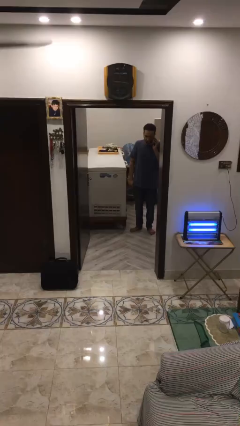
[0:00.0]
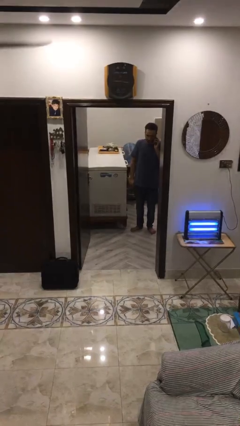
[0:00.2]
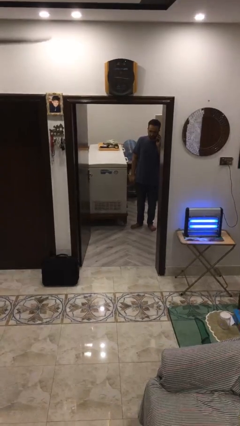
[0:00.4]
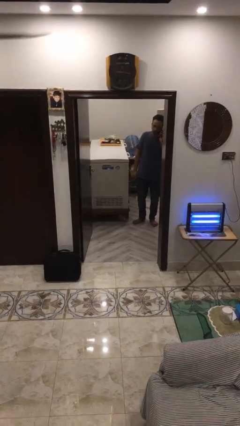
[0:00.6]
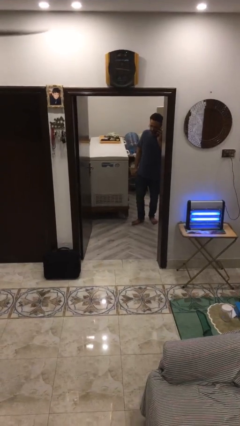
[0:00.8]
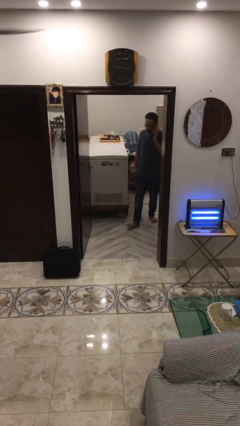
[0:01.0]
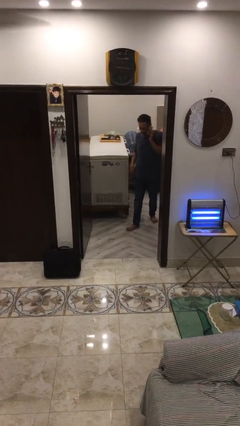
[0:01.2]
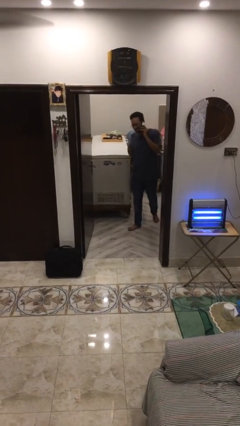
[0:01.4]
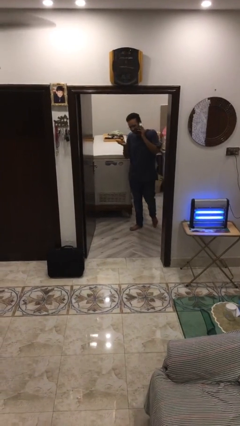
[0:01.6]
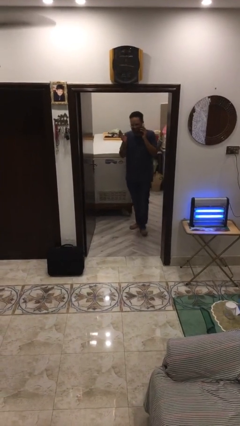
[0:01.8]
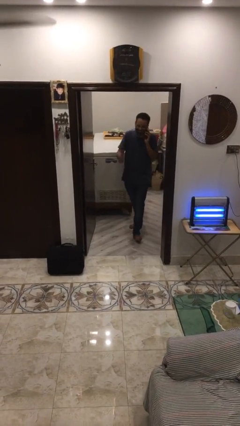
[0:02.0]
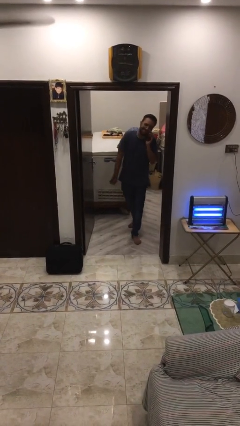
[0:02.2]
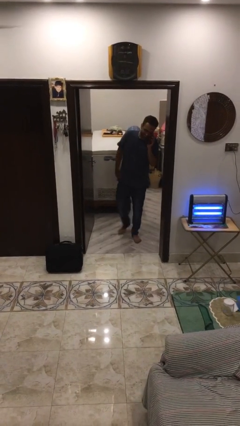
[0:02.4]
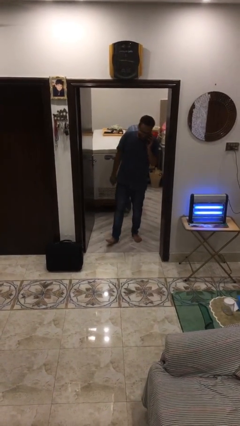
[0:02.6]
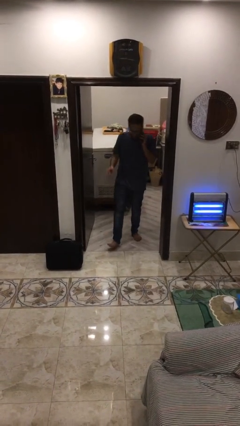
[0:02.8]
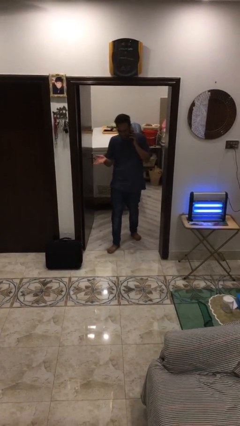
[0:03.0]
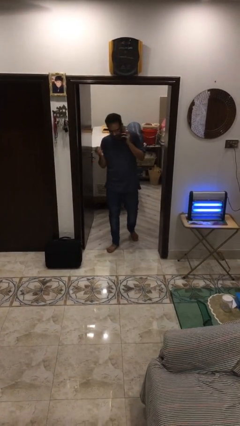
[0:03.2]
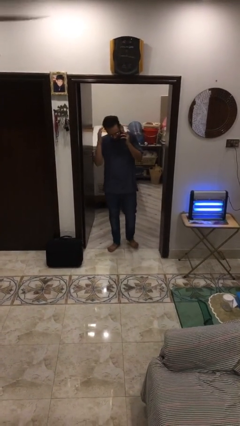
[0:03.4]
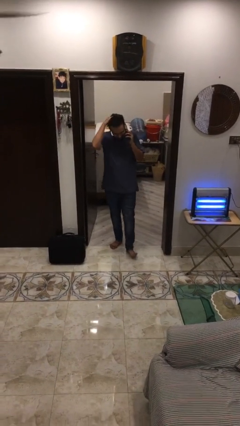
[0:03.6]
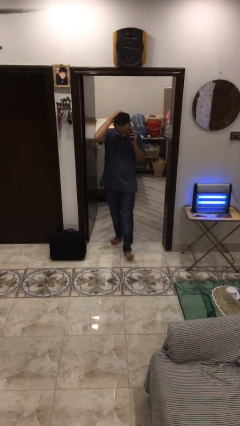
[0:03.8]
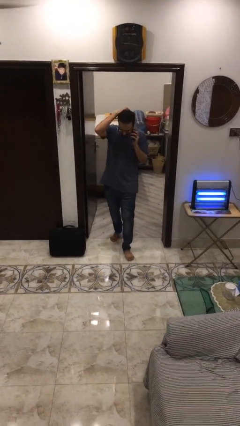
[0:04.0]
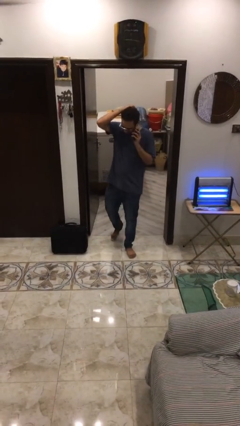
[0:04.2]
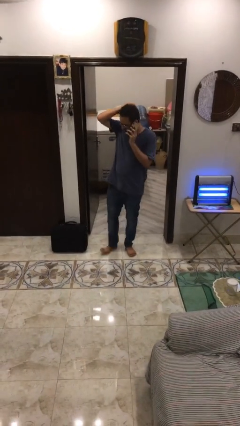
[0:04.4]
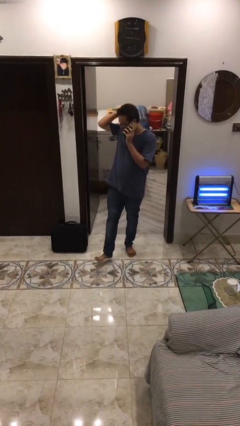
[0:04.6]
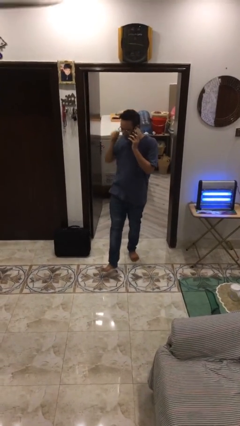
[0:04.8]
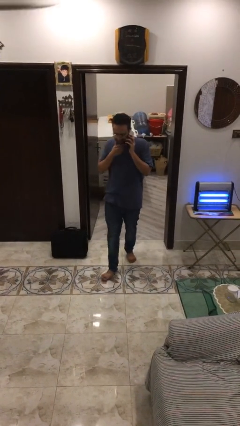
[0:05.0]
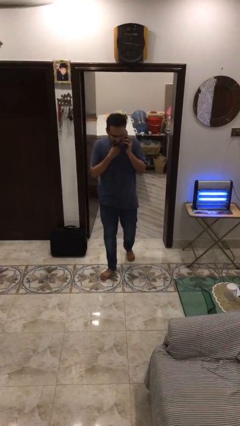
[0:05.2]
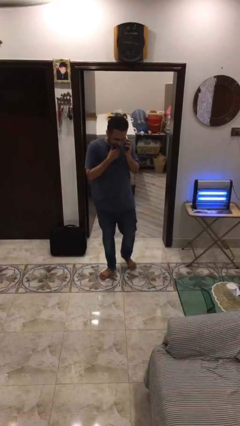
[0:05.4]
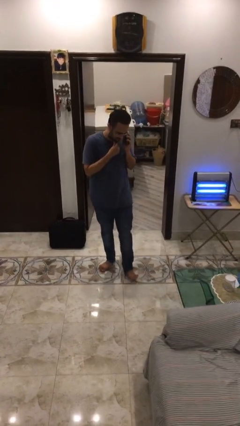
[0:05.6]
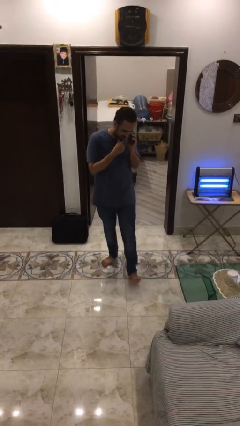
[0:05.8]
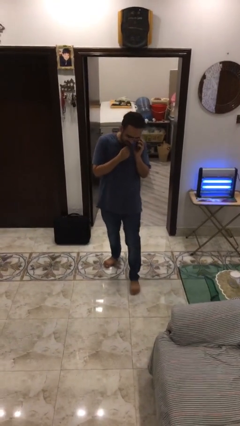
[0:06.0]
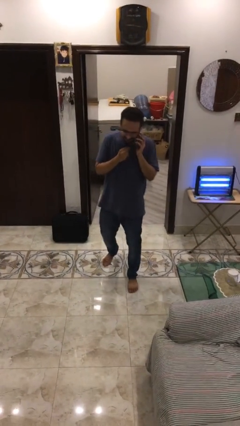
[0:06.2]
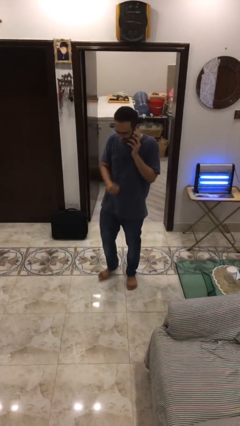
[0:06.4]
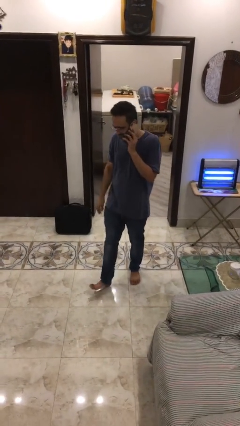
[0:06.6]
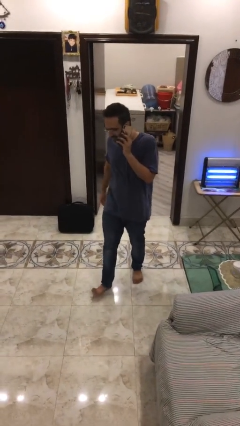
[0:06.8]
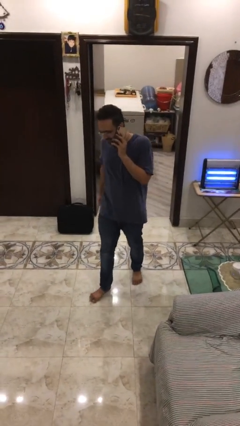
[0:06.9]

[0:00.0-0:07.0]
person enters scene through structure

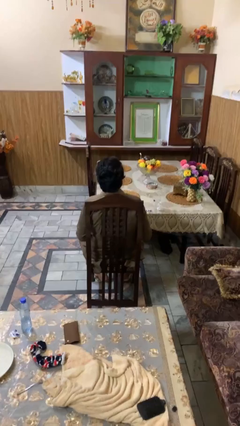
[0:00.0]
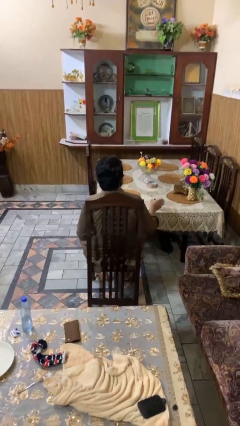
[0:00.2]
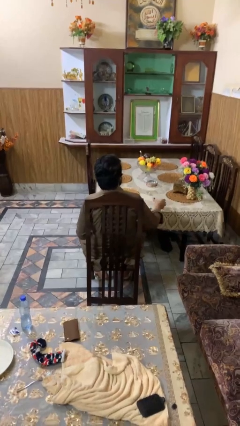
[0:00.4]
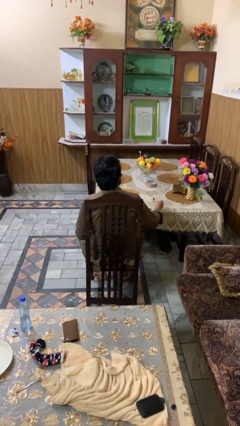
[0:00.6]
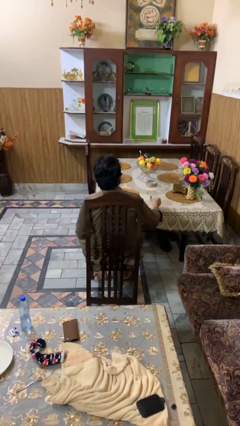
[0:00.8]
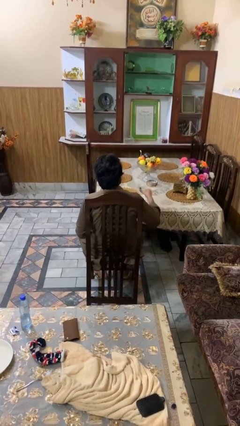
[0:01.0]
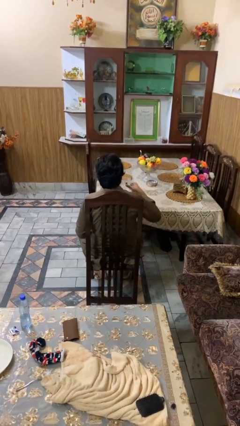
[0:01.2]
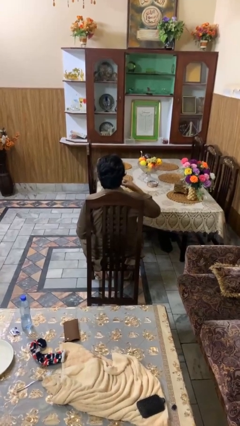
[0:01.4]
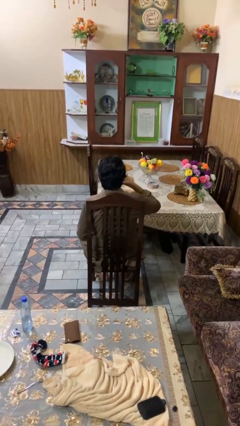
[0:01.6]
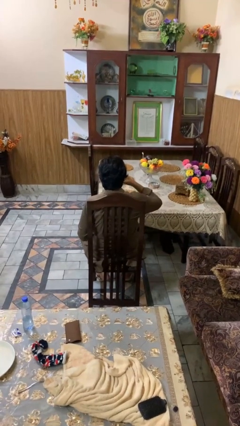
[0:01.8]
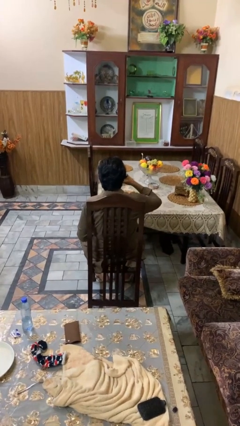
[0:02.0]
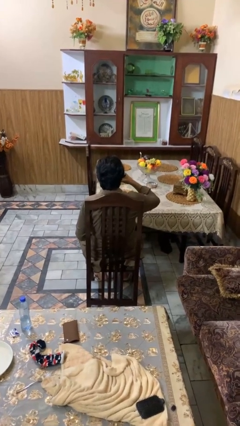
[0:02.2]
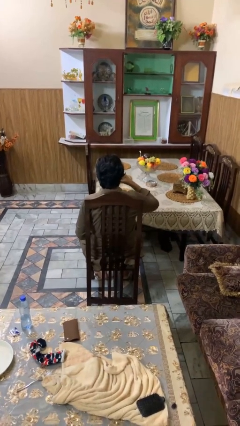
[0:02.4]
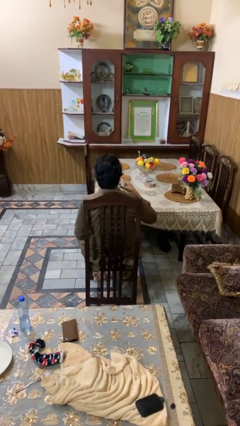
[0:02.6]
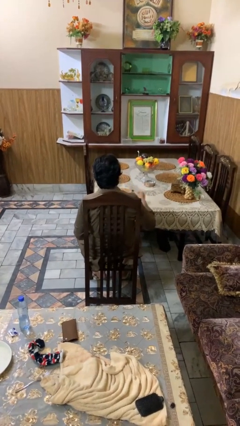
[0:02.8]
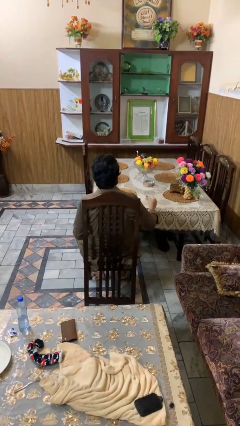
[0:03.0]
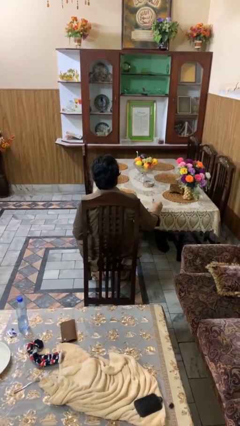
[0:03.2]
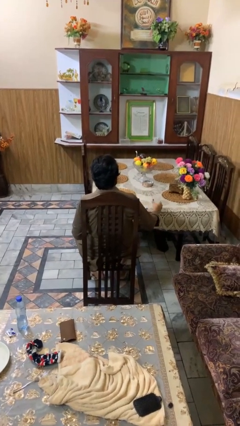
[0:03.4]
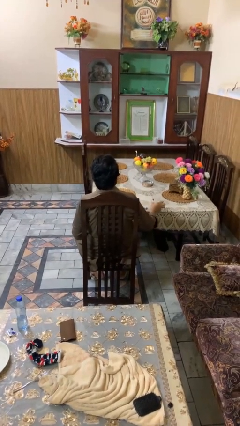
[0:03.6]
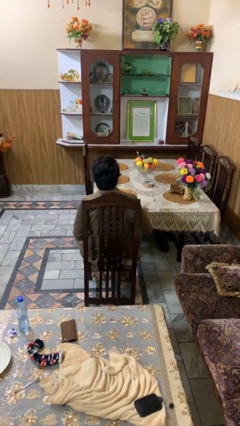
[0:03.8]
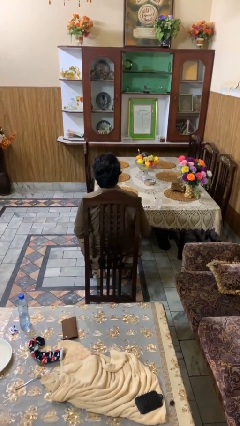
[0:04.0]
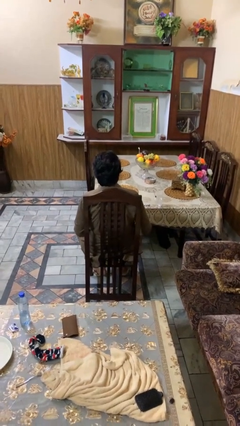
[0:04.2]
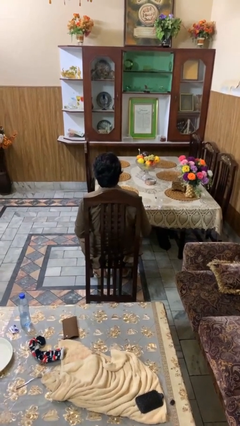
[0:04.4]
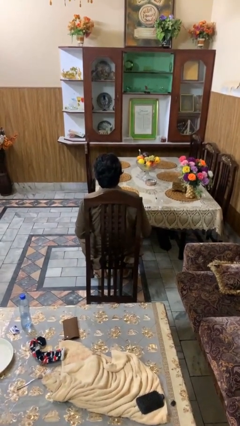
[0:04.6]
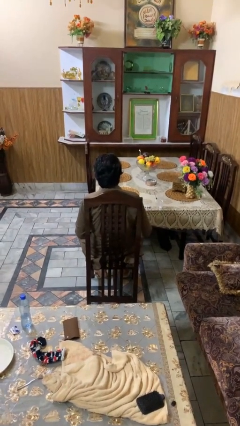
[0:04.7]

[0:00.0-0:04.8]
person drinks from cup

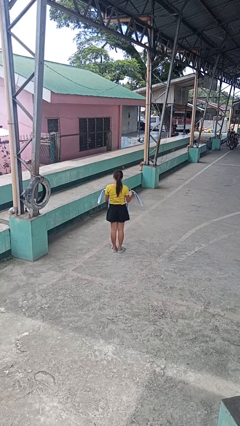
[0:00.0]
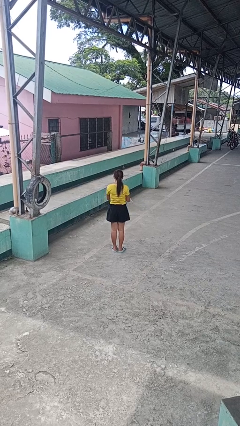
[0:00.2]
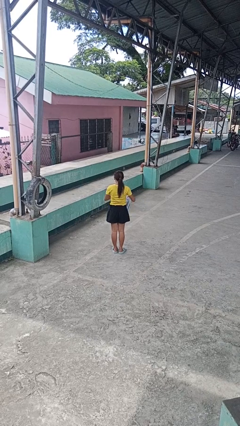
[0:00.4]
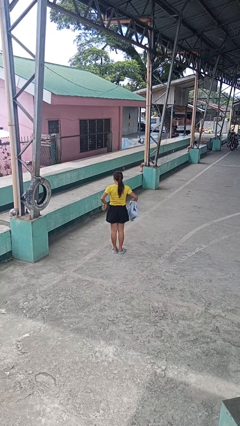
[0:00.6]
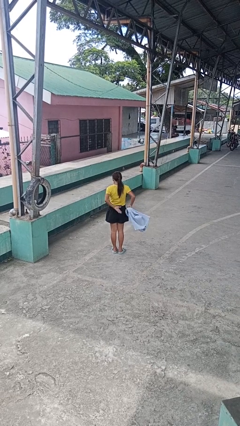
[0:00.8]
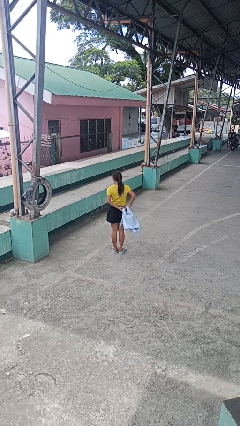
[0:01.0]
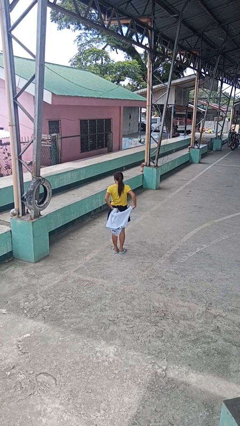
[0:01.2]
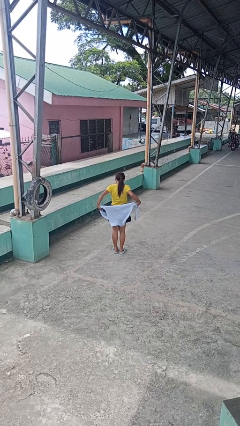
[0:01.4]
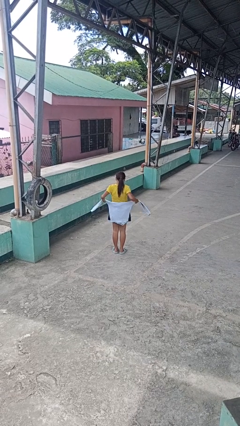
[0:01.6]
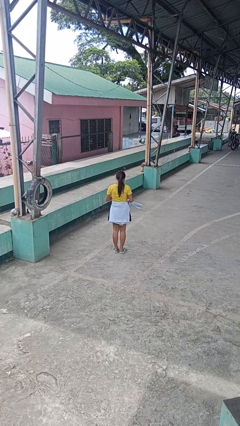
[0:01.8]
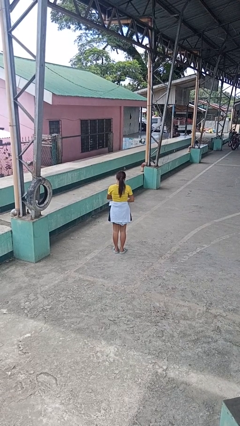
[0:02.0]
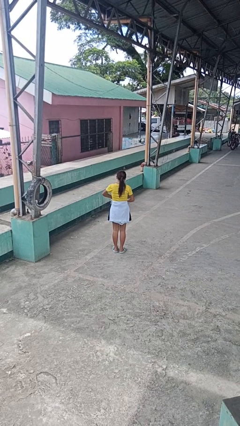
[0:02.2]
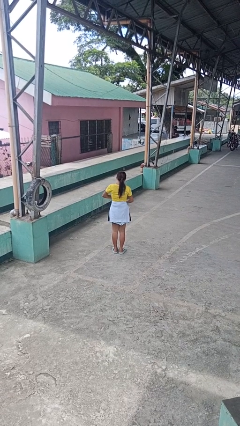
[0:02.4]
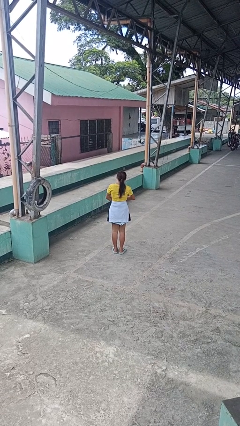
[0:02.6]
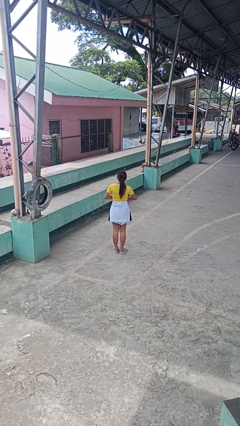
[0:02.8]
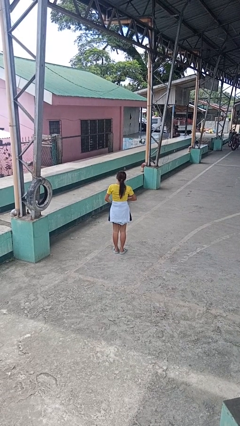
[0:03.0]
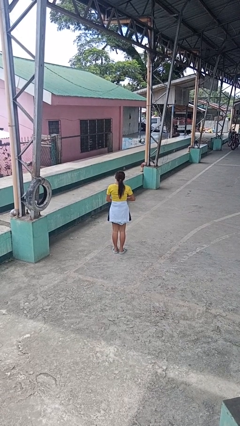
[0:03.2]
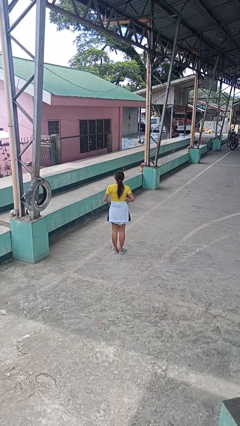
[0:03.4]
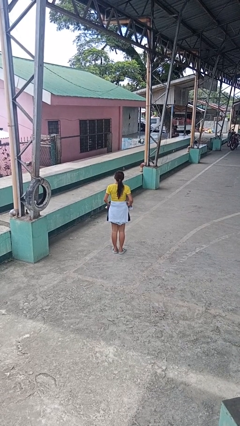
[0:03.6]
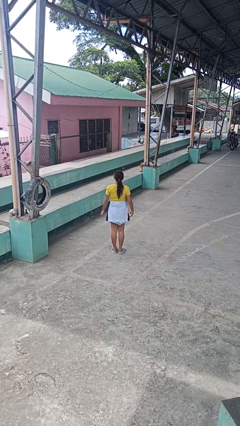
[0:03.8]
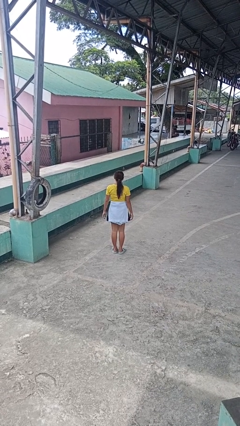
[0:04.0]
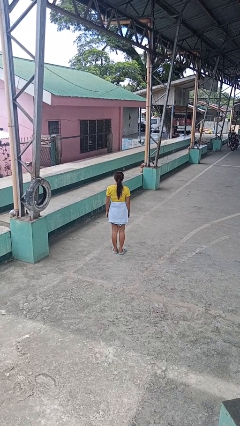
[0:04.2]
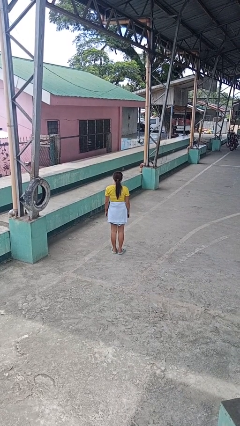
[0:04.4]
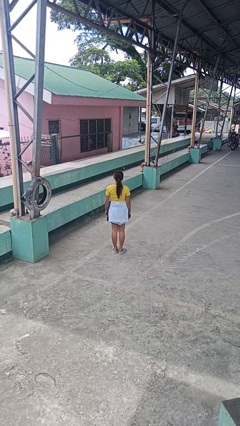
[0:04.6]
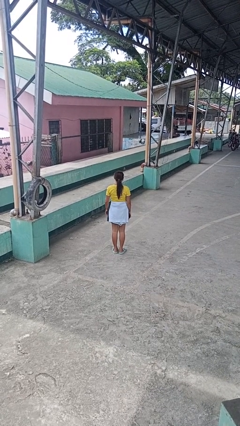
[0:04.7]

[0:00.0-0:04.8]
person ties jacket around waist

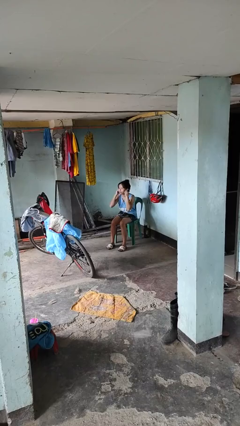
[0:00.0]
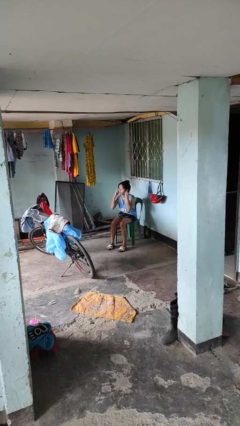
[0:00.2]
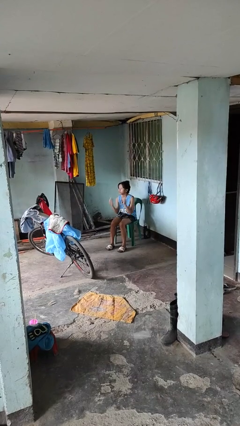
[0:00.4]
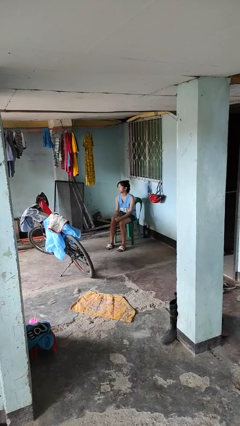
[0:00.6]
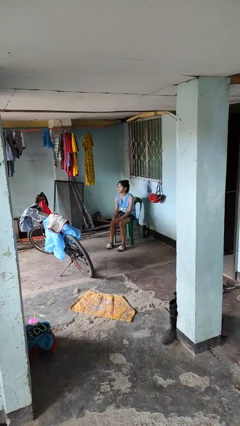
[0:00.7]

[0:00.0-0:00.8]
person takes off headphones

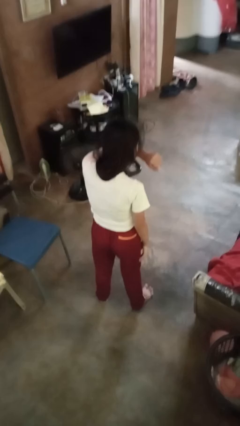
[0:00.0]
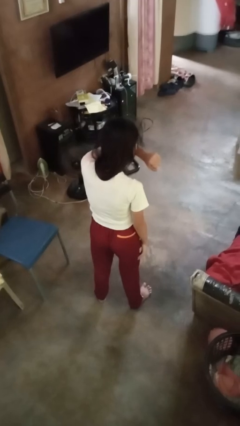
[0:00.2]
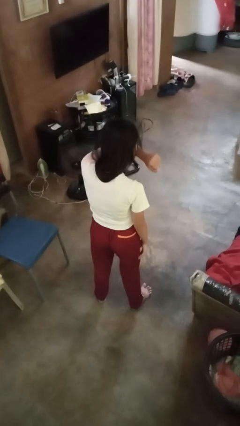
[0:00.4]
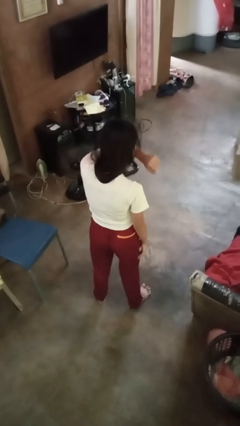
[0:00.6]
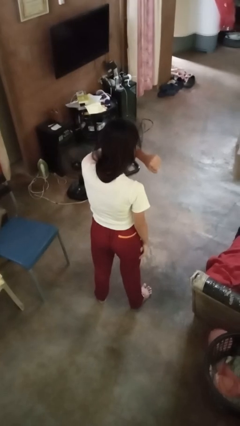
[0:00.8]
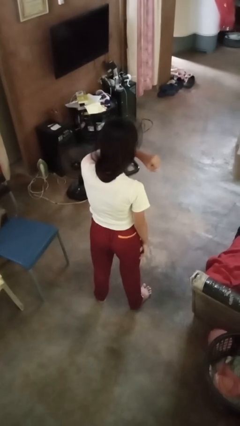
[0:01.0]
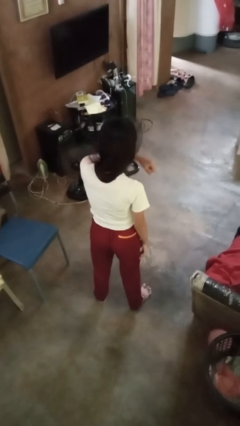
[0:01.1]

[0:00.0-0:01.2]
person sneezes into arm
